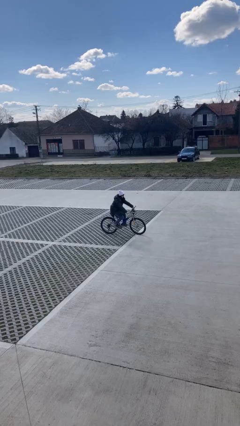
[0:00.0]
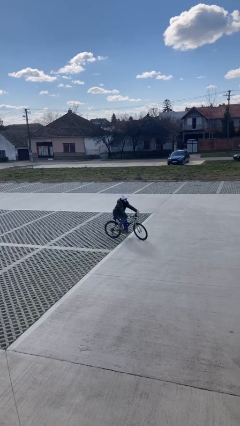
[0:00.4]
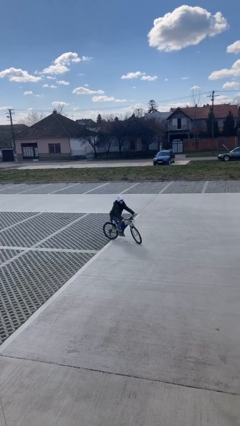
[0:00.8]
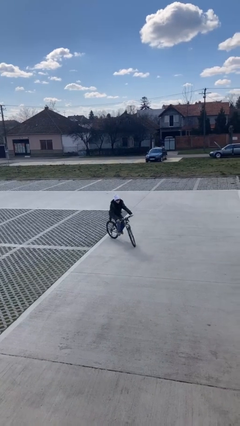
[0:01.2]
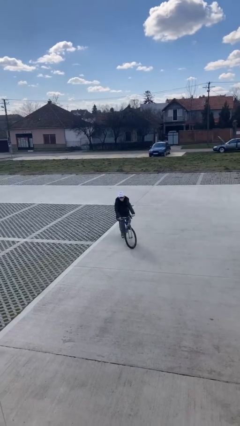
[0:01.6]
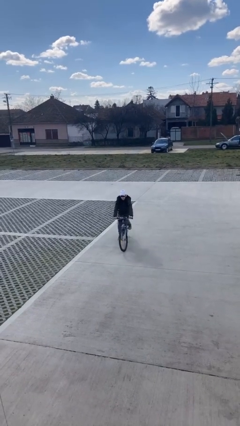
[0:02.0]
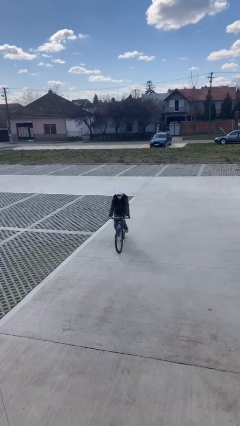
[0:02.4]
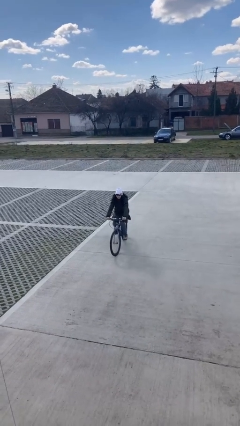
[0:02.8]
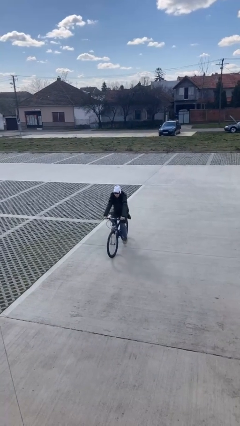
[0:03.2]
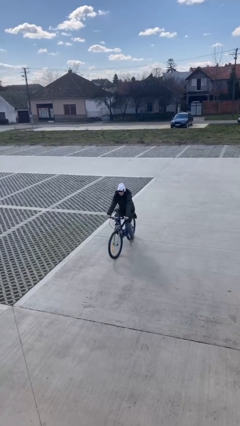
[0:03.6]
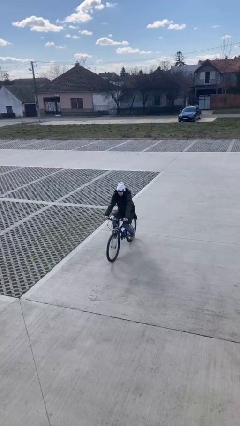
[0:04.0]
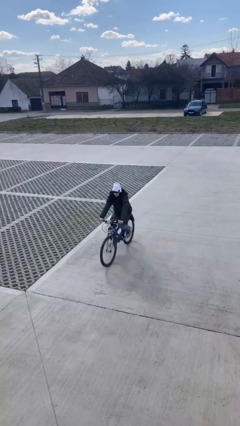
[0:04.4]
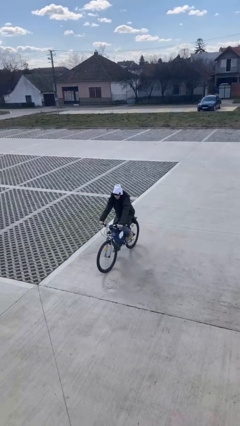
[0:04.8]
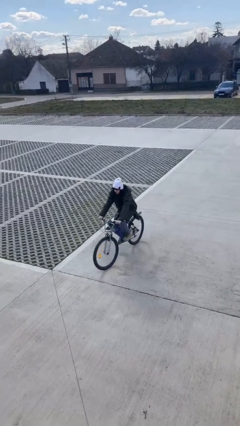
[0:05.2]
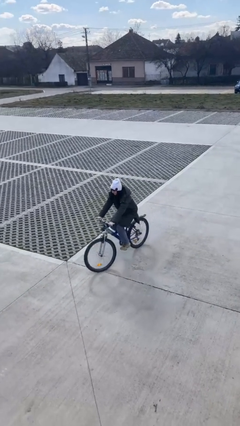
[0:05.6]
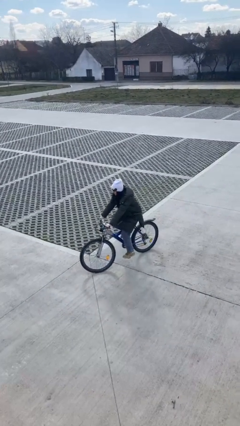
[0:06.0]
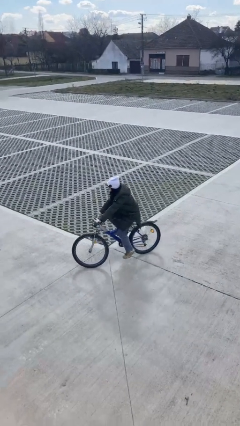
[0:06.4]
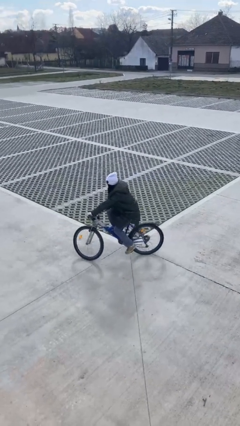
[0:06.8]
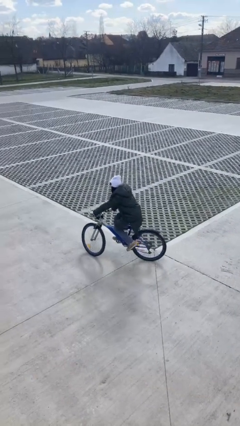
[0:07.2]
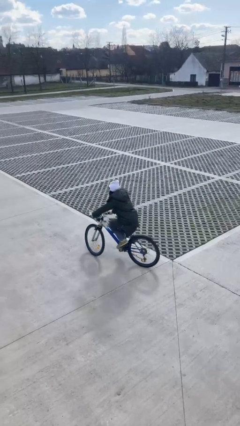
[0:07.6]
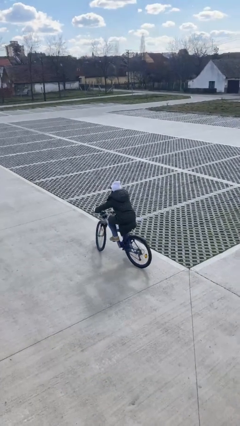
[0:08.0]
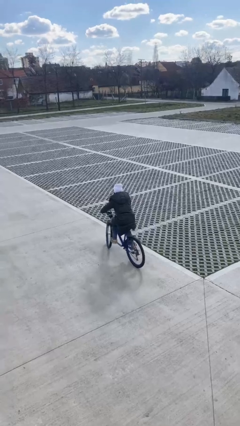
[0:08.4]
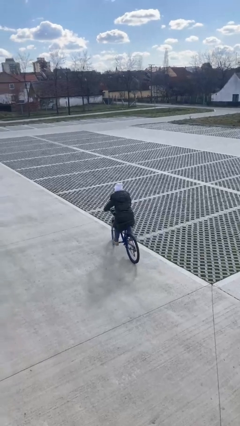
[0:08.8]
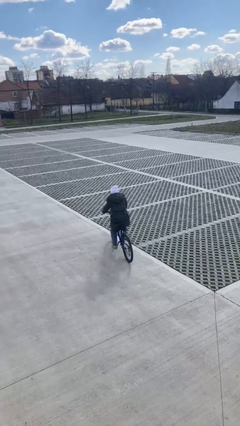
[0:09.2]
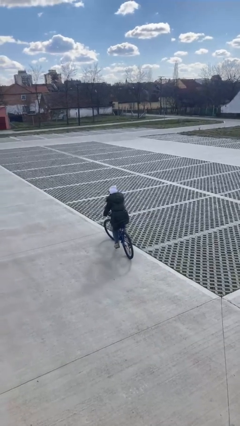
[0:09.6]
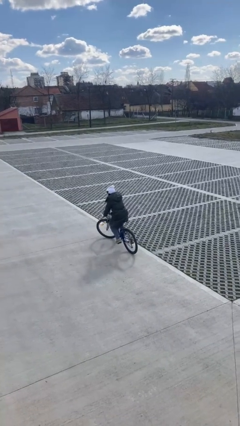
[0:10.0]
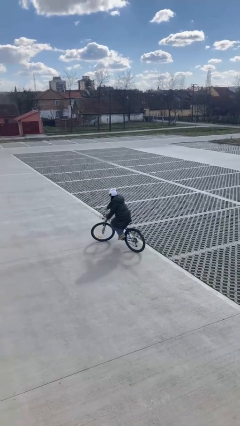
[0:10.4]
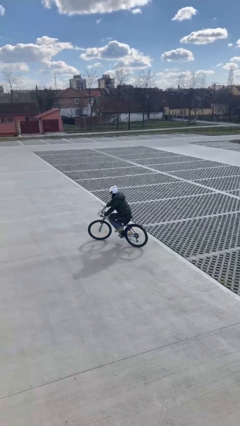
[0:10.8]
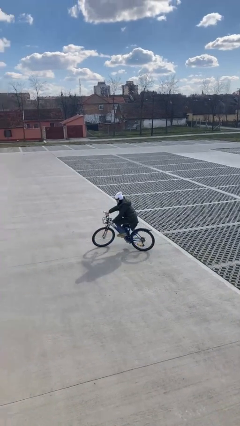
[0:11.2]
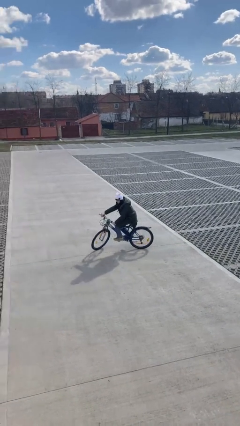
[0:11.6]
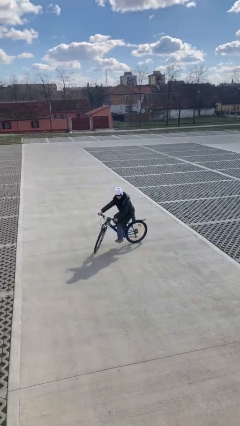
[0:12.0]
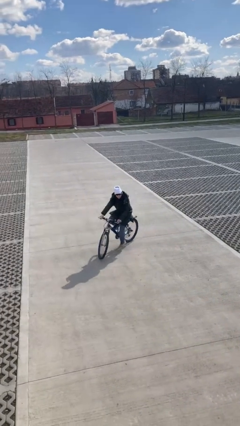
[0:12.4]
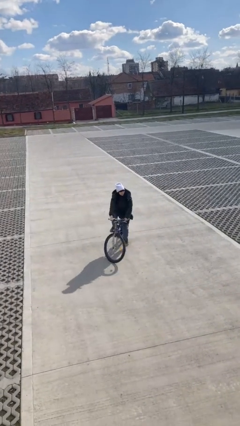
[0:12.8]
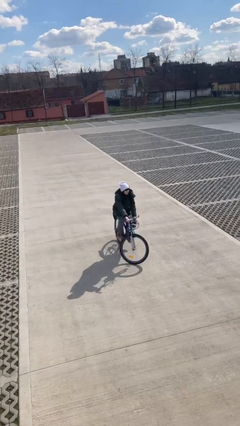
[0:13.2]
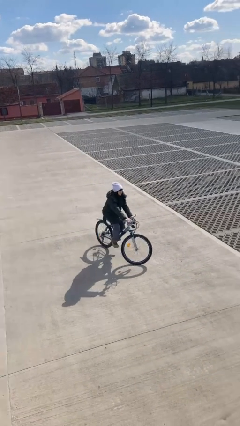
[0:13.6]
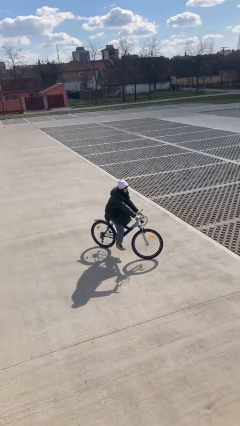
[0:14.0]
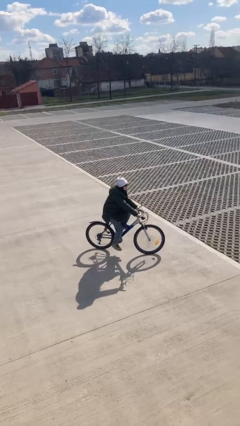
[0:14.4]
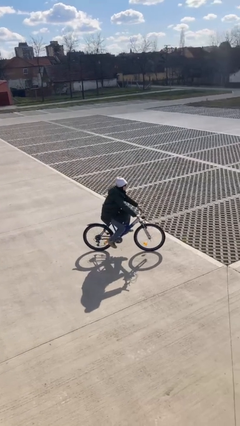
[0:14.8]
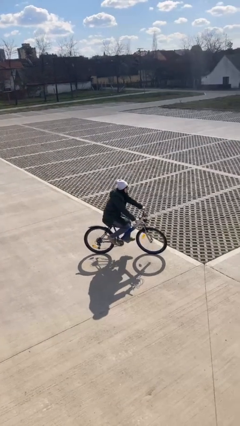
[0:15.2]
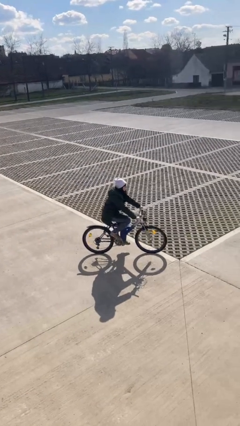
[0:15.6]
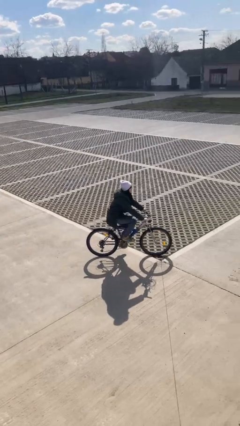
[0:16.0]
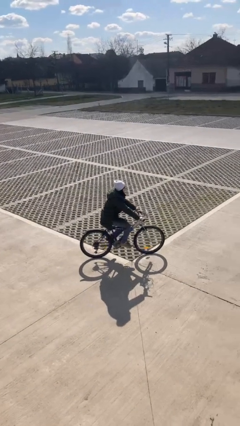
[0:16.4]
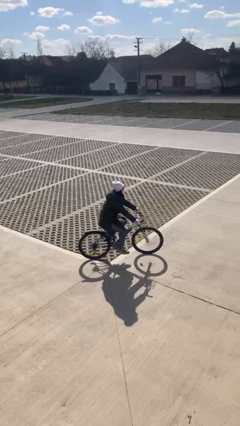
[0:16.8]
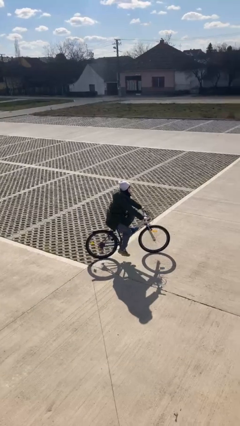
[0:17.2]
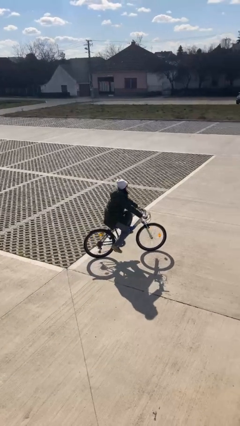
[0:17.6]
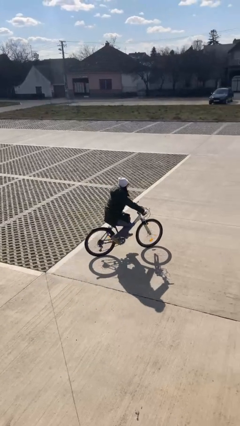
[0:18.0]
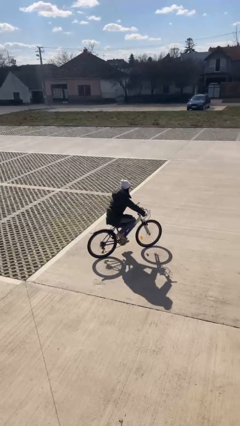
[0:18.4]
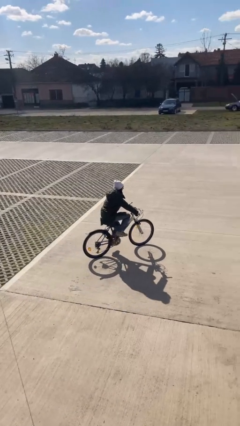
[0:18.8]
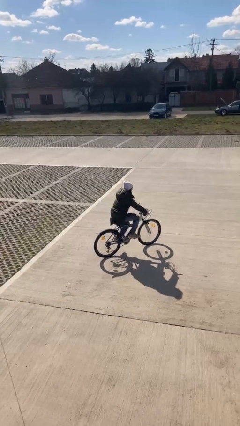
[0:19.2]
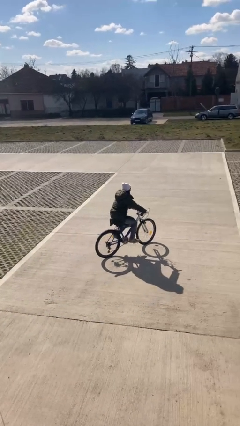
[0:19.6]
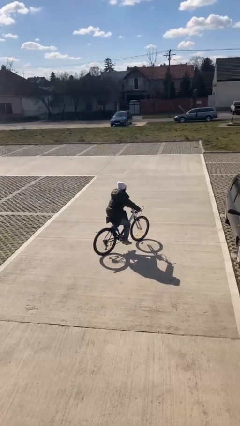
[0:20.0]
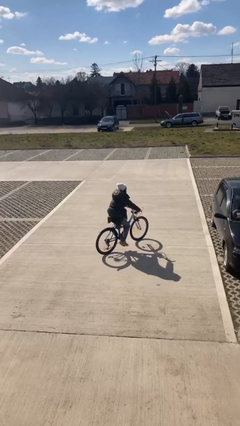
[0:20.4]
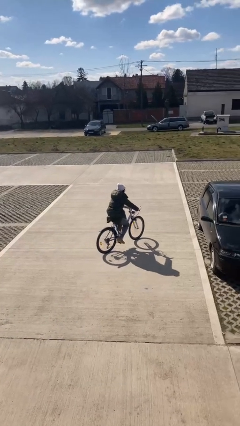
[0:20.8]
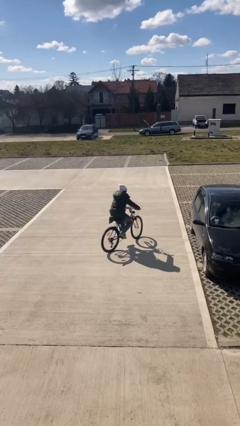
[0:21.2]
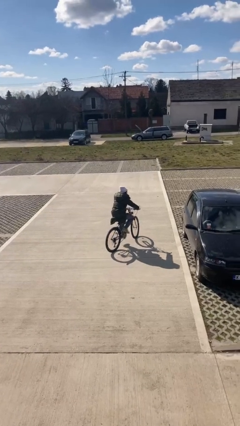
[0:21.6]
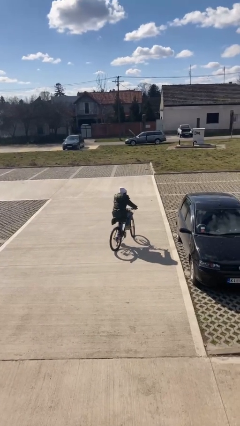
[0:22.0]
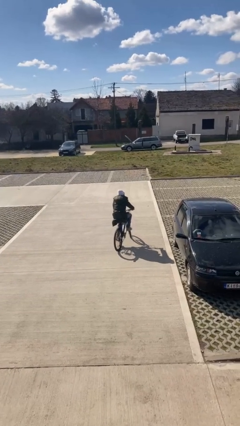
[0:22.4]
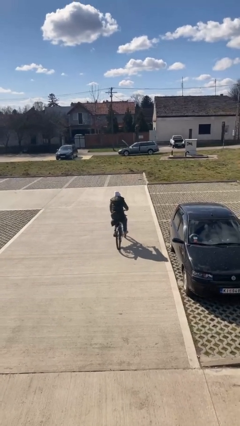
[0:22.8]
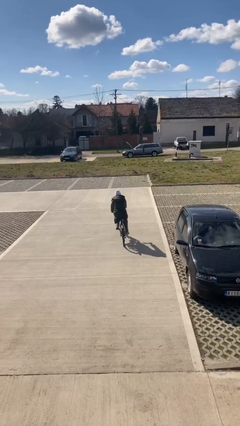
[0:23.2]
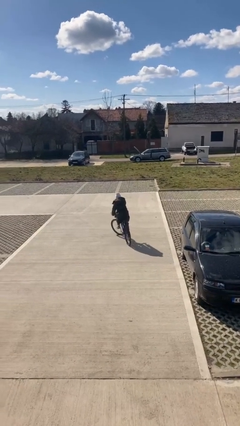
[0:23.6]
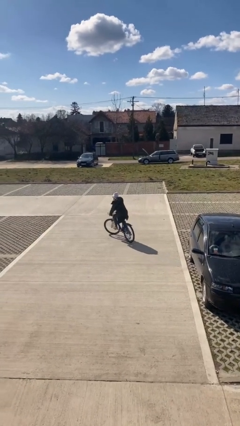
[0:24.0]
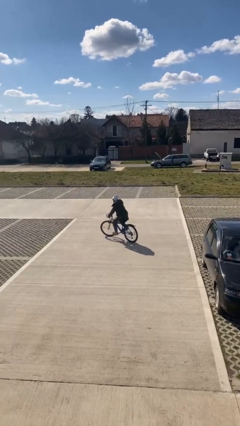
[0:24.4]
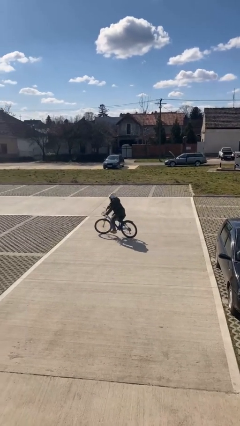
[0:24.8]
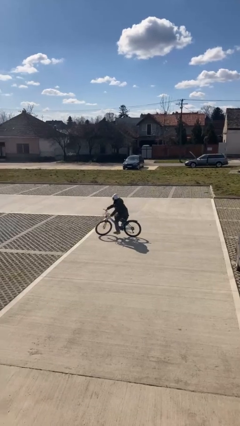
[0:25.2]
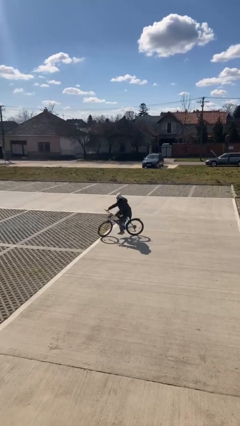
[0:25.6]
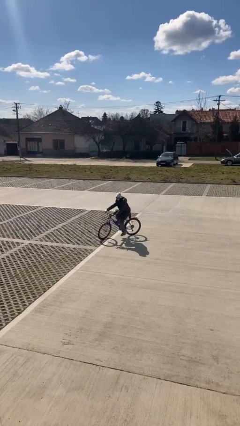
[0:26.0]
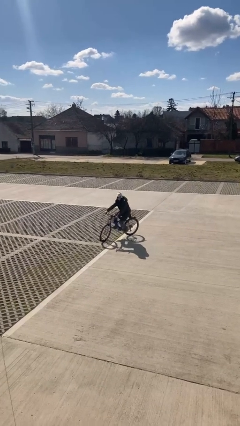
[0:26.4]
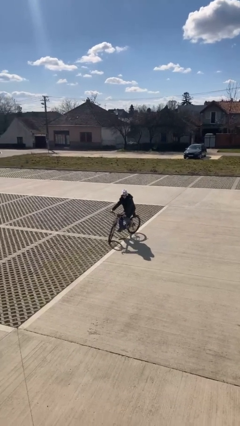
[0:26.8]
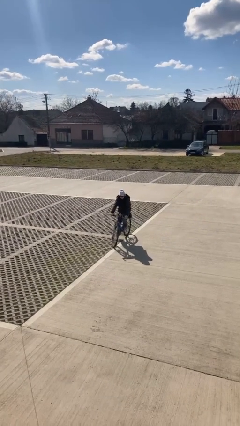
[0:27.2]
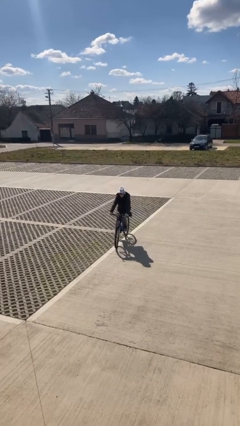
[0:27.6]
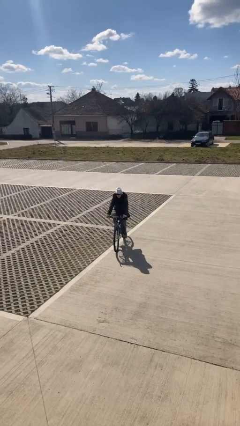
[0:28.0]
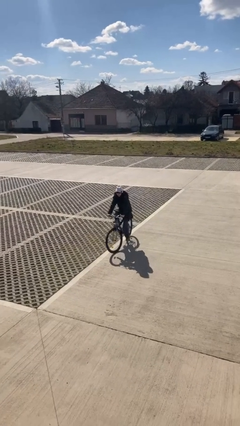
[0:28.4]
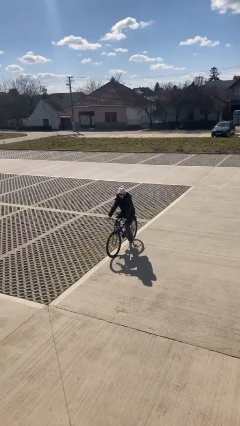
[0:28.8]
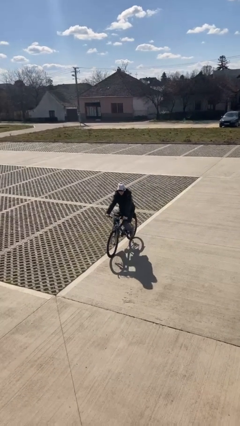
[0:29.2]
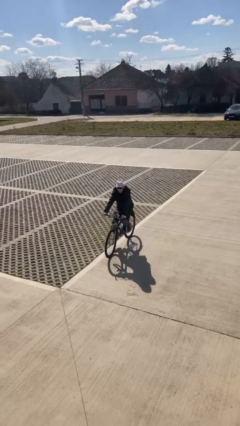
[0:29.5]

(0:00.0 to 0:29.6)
person rides bicycle

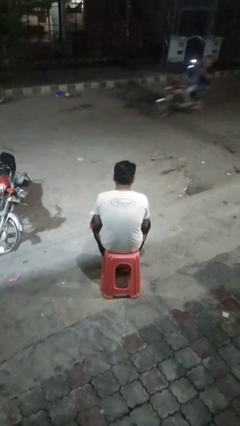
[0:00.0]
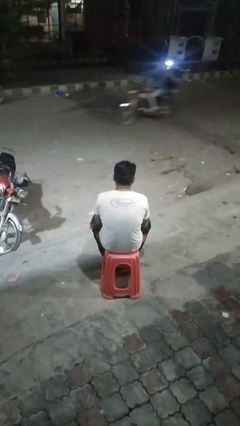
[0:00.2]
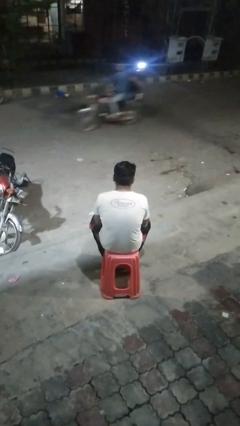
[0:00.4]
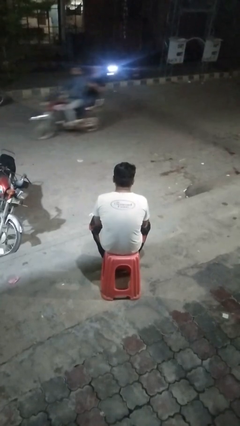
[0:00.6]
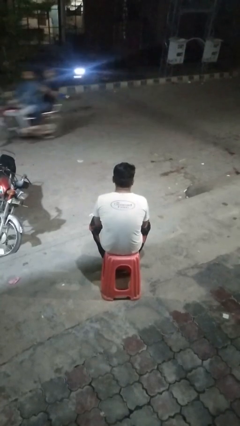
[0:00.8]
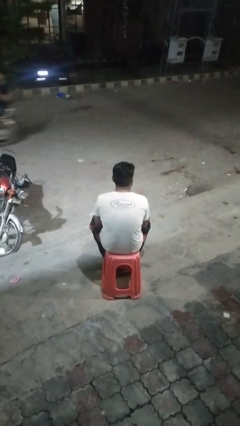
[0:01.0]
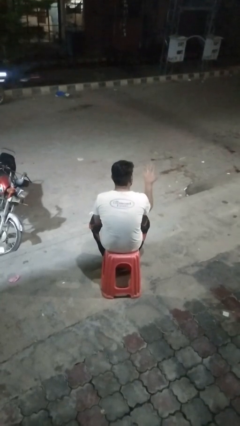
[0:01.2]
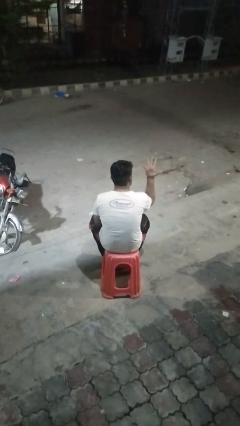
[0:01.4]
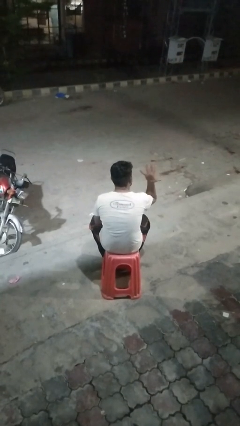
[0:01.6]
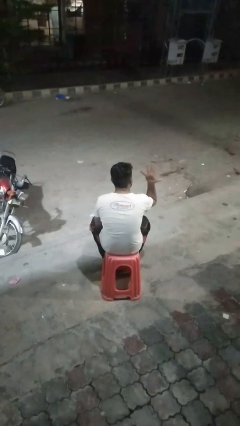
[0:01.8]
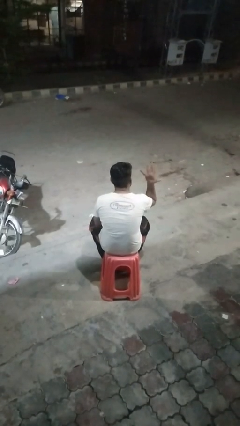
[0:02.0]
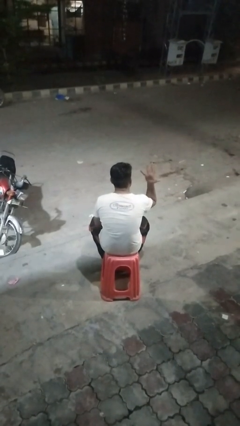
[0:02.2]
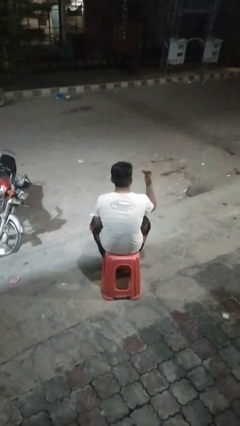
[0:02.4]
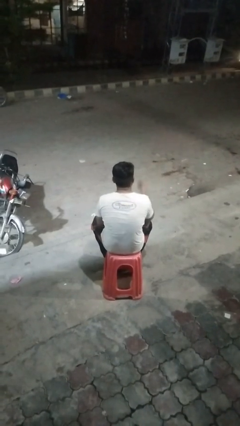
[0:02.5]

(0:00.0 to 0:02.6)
person gestures number five

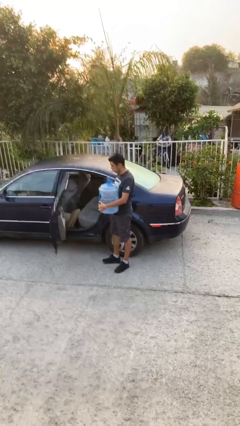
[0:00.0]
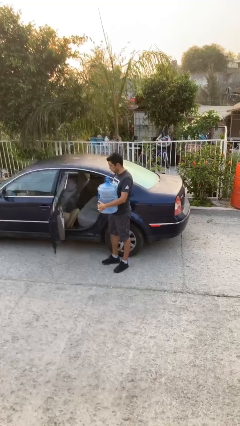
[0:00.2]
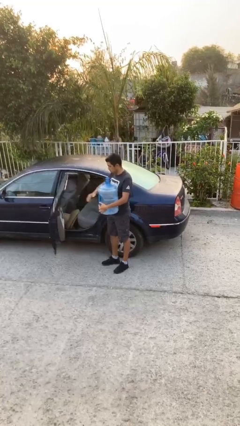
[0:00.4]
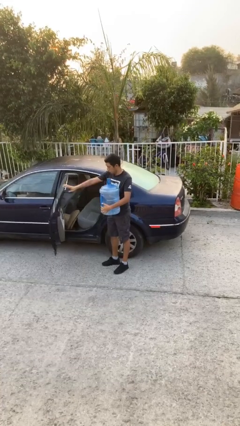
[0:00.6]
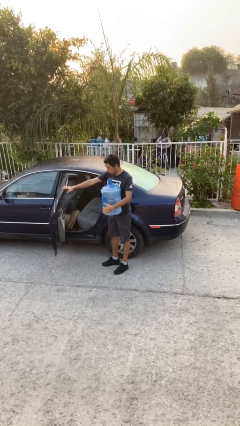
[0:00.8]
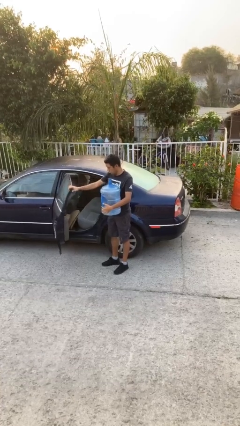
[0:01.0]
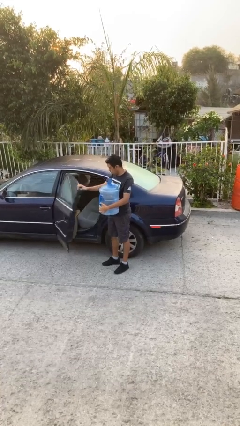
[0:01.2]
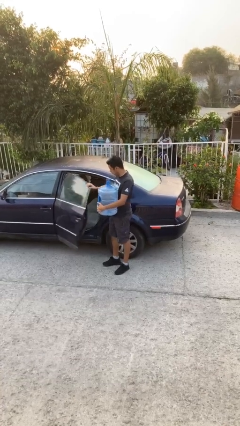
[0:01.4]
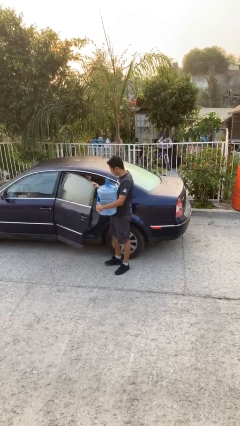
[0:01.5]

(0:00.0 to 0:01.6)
person closes car door
